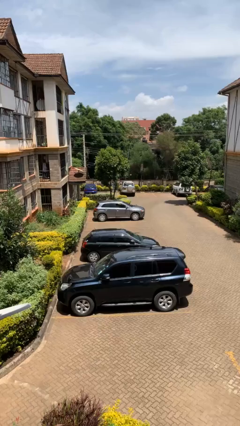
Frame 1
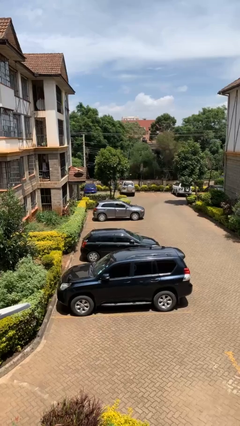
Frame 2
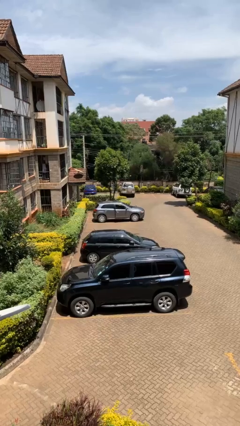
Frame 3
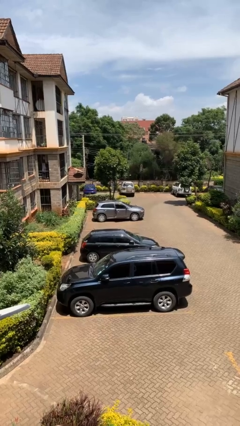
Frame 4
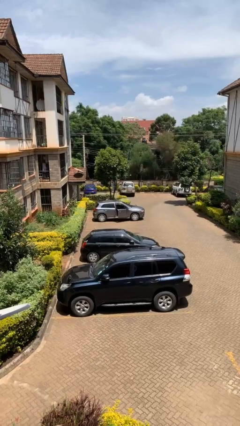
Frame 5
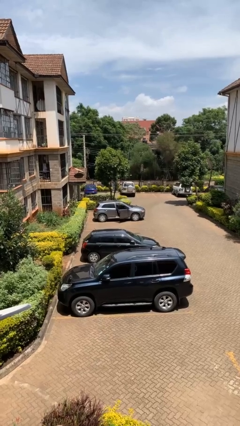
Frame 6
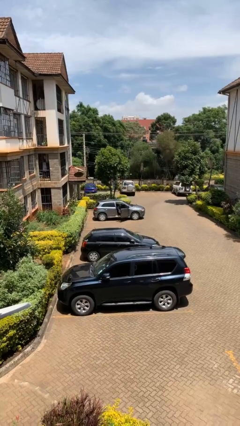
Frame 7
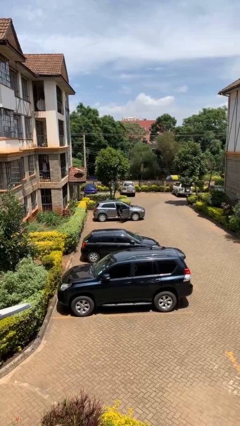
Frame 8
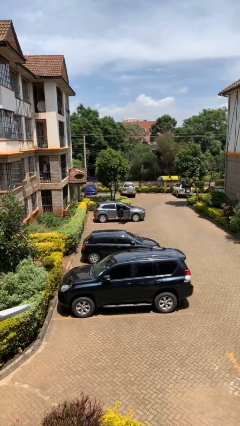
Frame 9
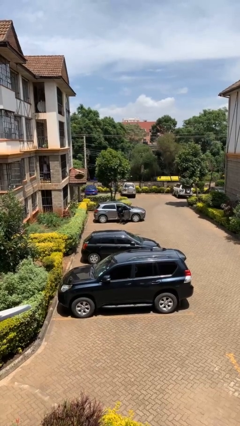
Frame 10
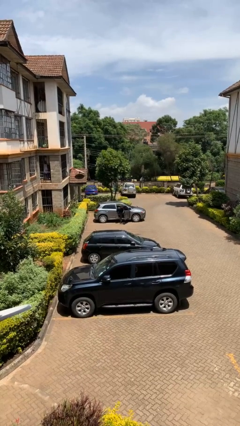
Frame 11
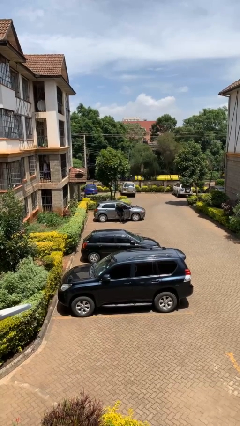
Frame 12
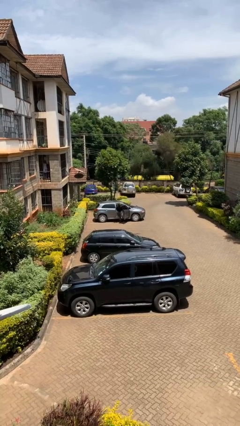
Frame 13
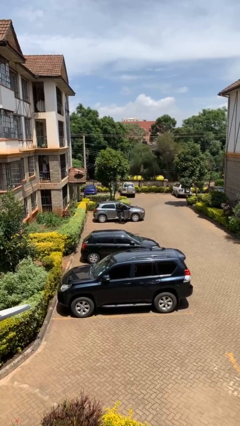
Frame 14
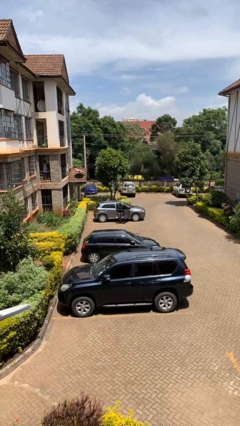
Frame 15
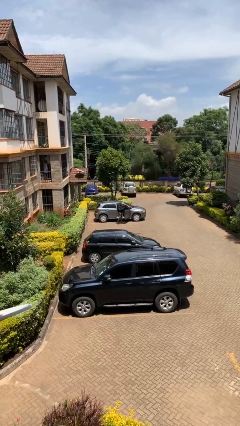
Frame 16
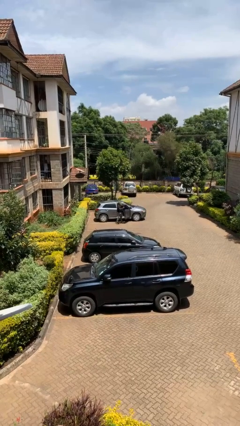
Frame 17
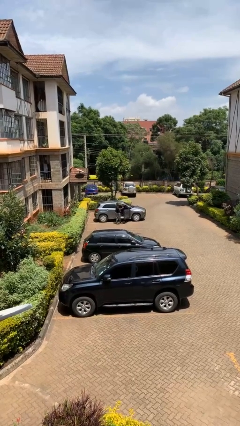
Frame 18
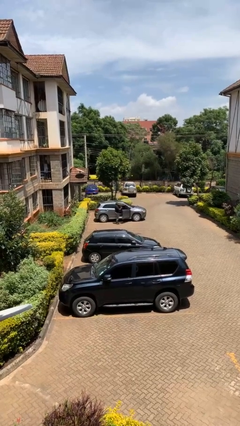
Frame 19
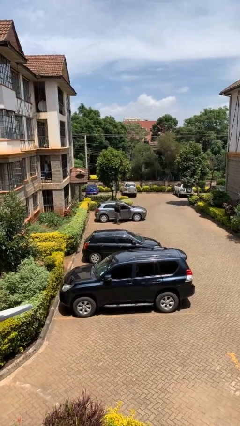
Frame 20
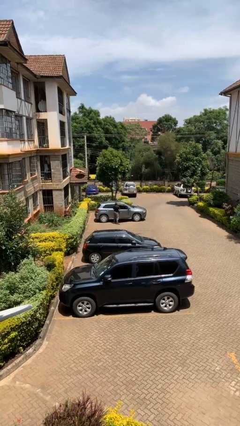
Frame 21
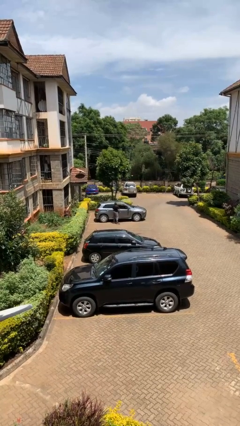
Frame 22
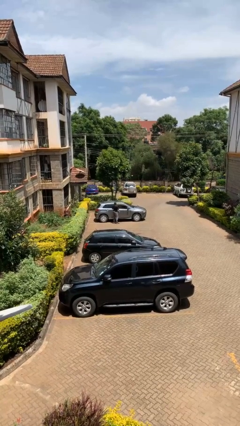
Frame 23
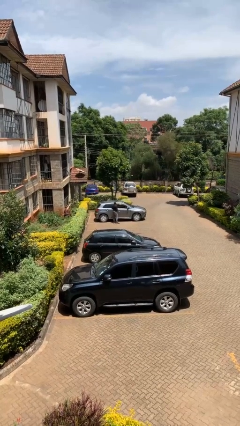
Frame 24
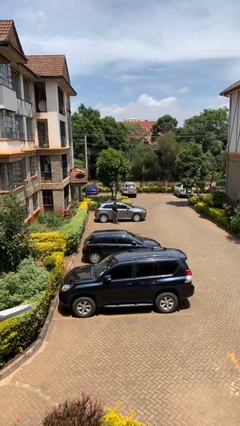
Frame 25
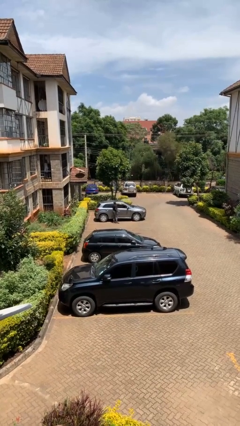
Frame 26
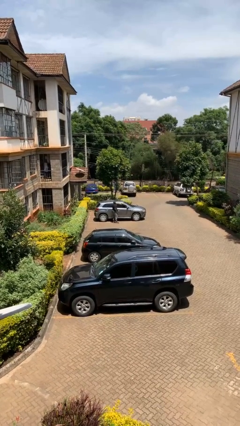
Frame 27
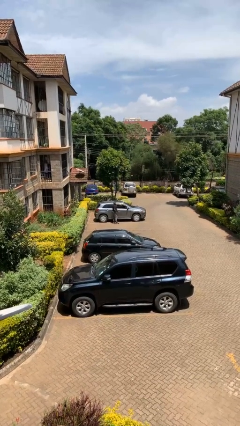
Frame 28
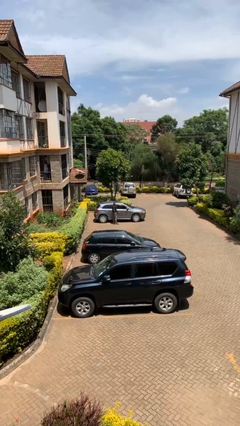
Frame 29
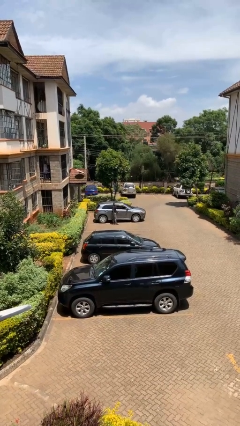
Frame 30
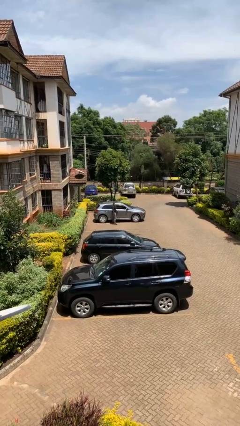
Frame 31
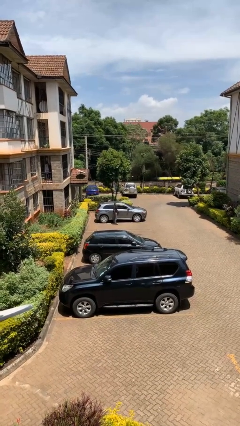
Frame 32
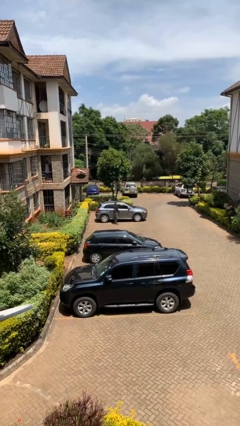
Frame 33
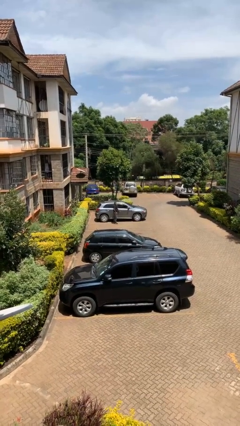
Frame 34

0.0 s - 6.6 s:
car drops off person

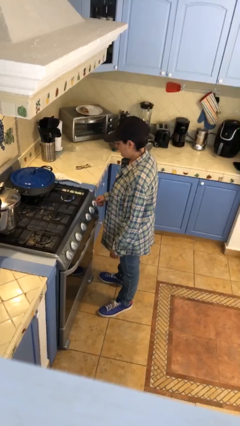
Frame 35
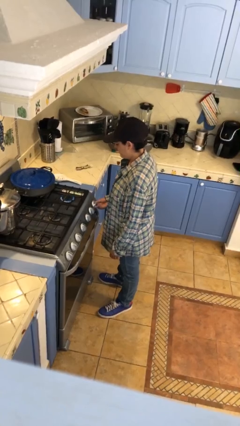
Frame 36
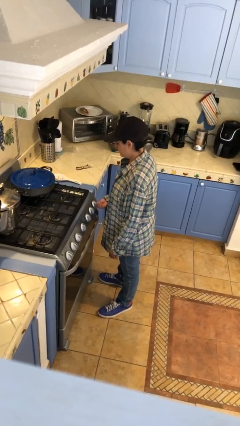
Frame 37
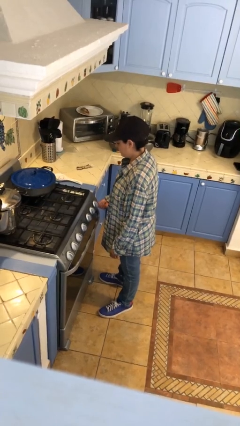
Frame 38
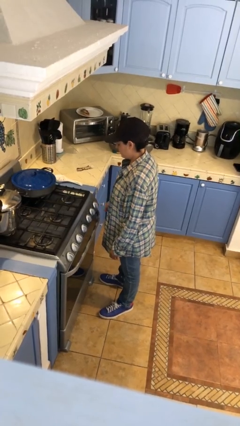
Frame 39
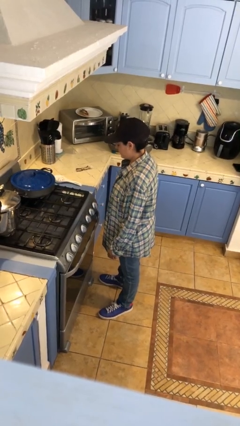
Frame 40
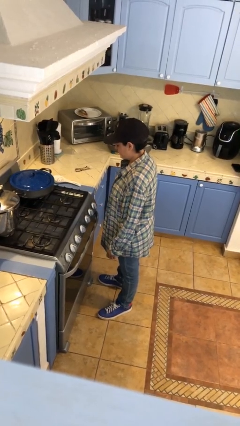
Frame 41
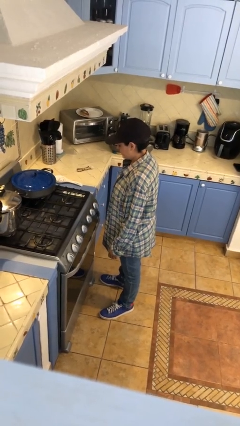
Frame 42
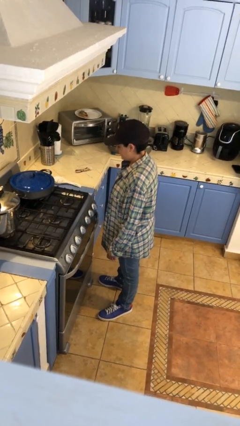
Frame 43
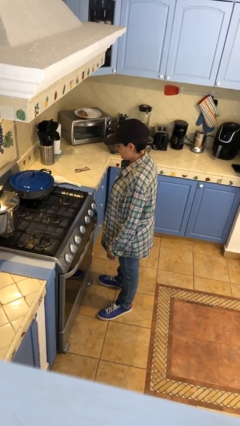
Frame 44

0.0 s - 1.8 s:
person turns off stovetop

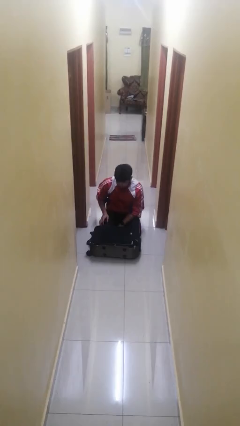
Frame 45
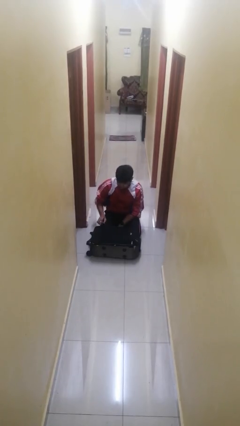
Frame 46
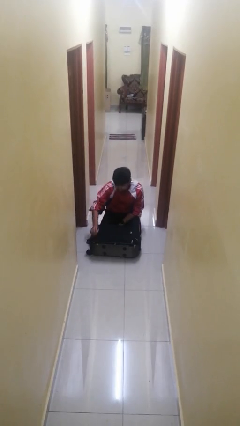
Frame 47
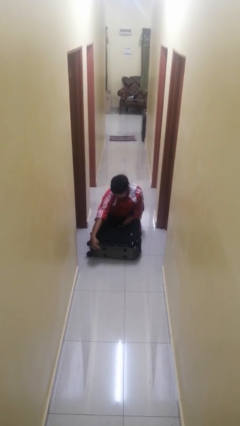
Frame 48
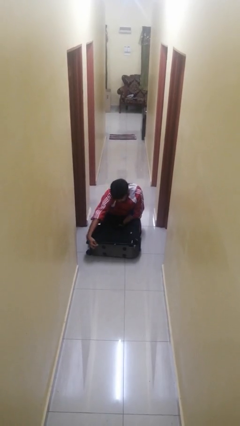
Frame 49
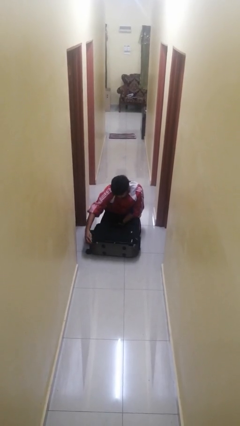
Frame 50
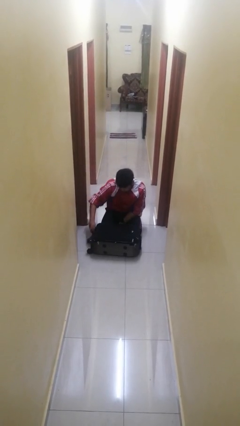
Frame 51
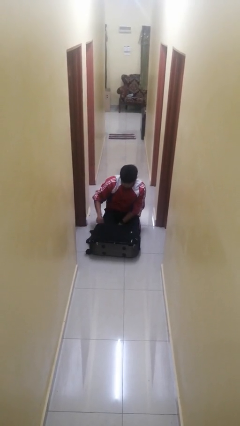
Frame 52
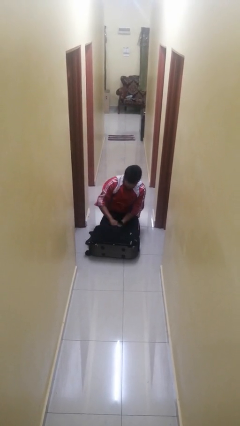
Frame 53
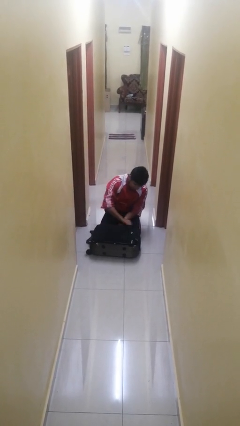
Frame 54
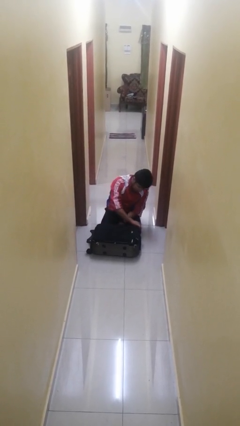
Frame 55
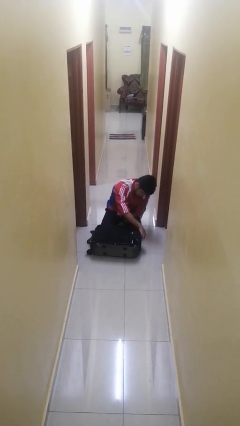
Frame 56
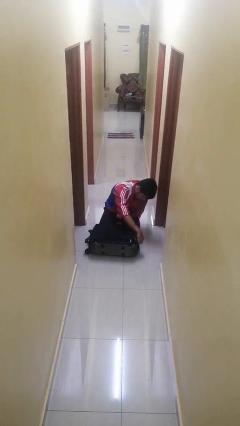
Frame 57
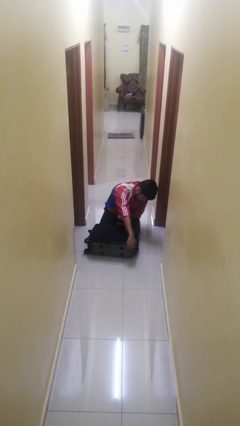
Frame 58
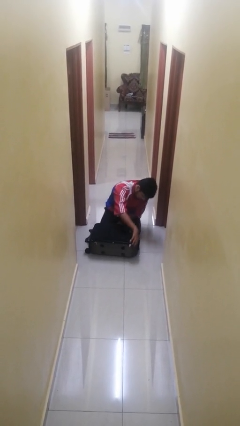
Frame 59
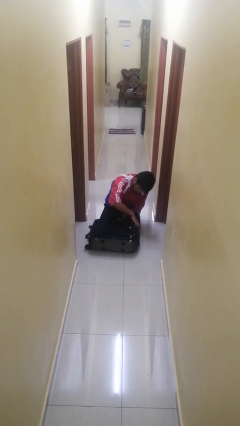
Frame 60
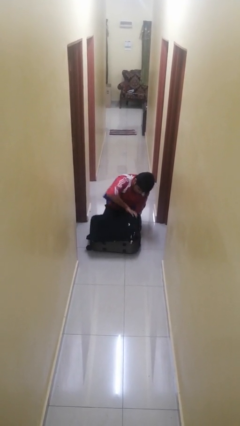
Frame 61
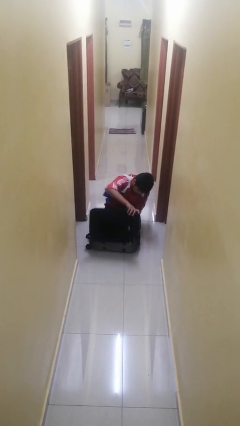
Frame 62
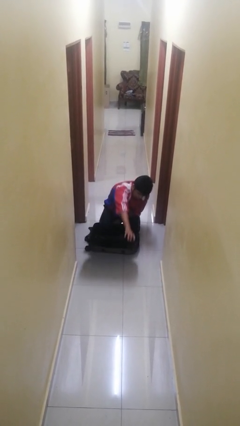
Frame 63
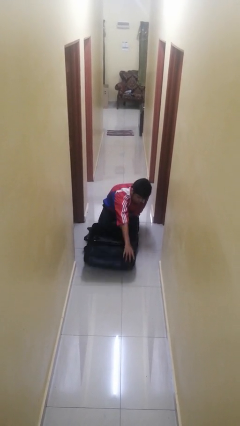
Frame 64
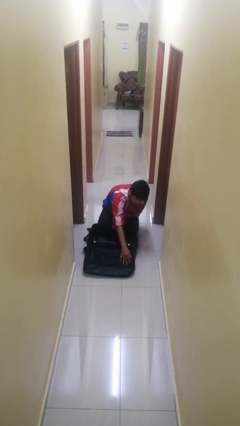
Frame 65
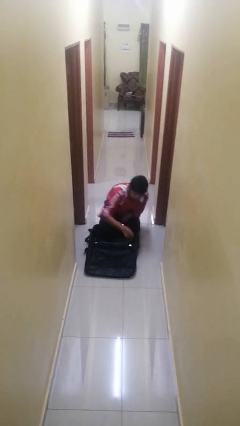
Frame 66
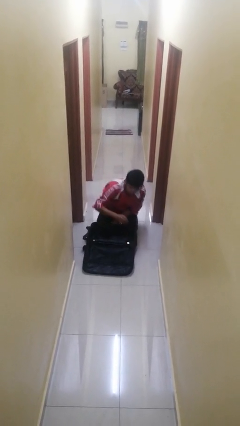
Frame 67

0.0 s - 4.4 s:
person opens suitcase

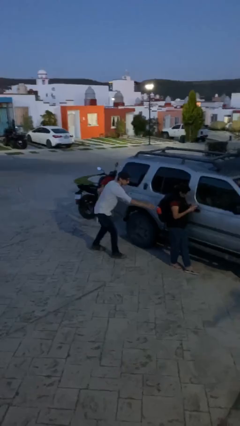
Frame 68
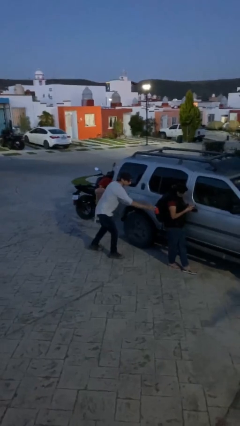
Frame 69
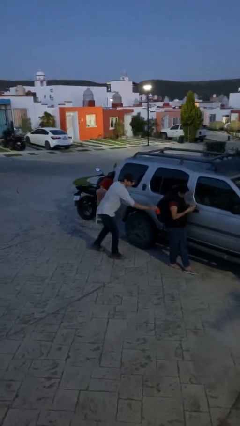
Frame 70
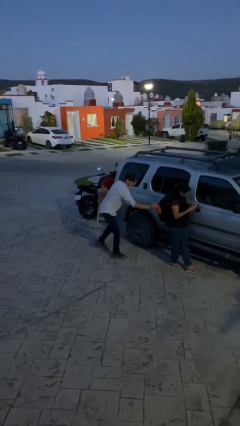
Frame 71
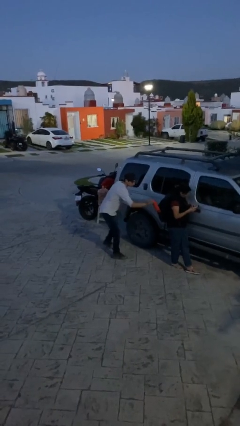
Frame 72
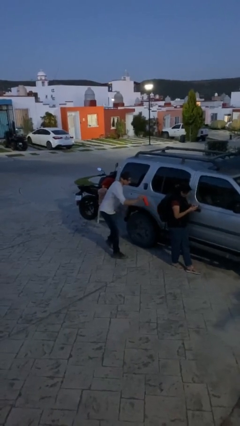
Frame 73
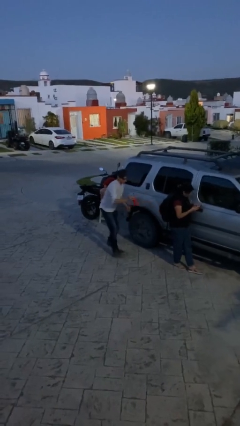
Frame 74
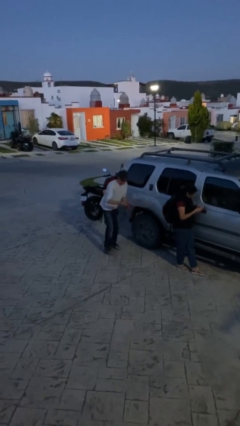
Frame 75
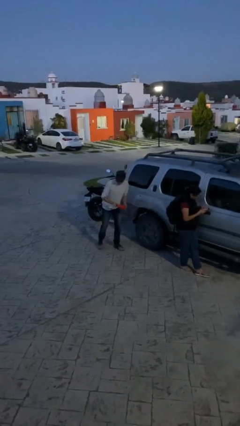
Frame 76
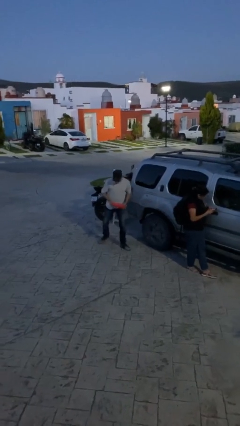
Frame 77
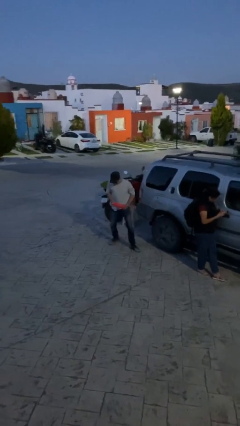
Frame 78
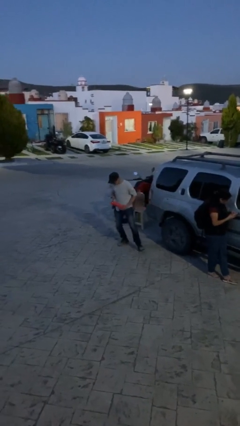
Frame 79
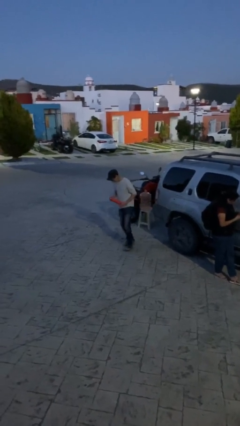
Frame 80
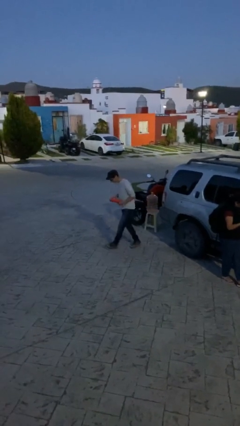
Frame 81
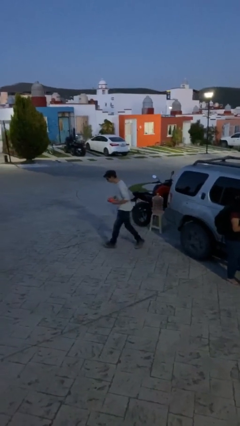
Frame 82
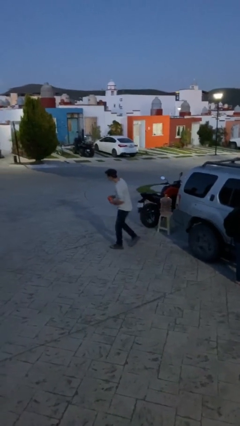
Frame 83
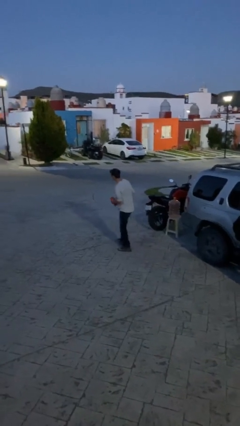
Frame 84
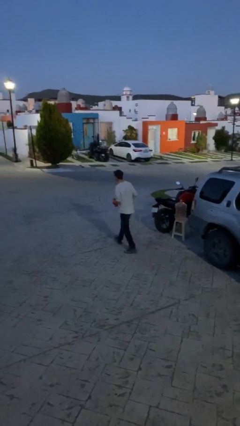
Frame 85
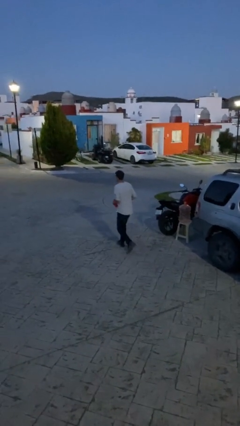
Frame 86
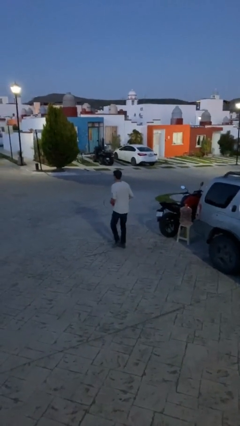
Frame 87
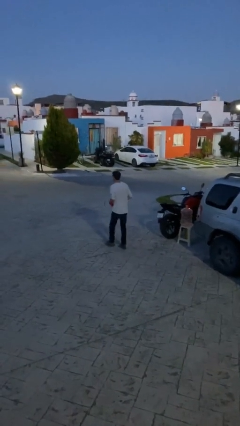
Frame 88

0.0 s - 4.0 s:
person steals object from person

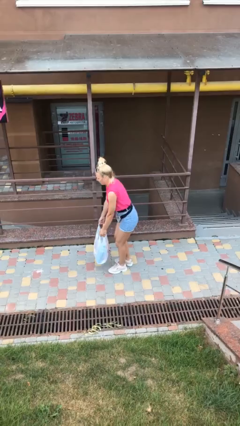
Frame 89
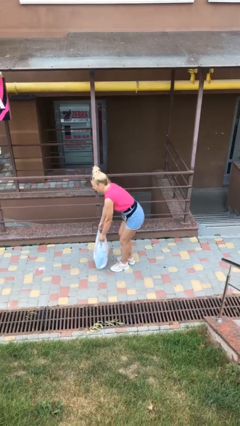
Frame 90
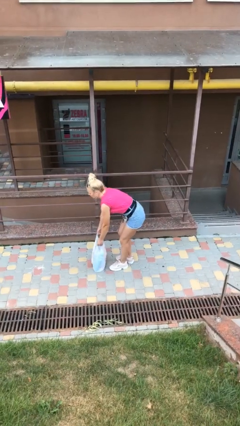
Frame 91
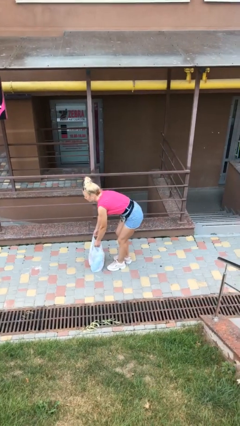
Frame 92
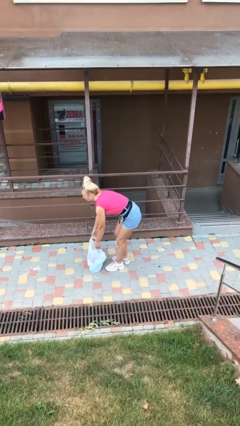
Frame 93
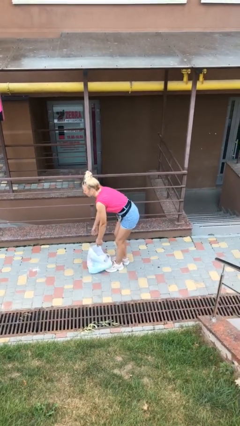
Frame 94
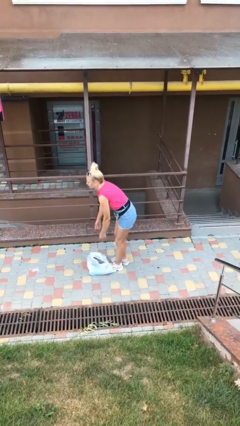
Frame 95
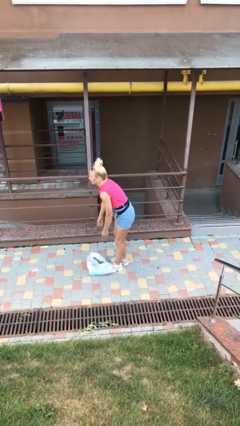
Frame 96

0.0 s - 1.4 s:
person puts down object on floor
